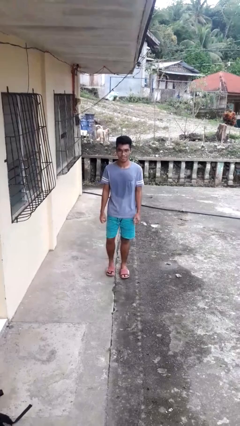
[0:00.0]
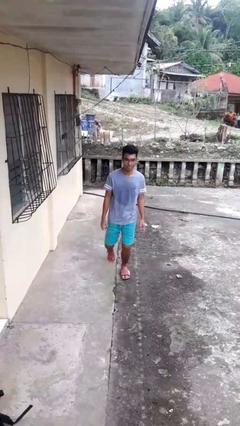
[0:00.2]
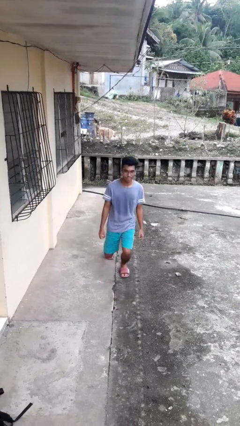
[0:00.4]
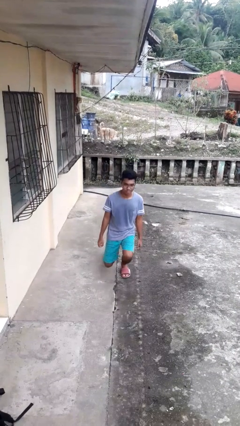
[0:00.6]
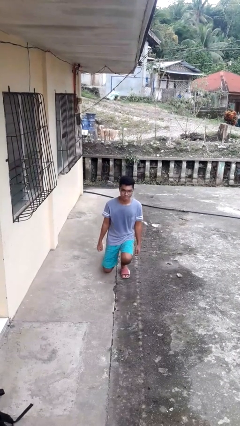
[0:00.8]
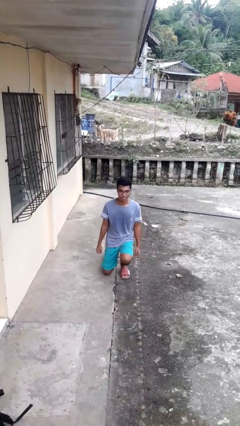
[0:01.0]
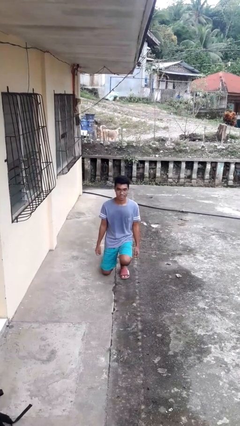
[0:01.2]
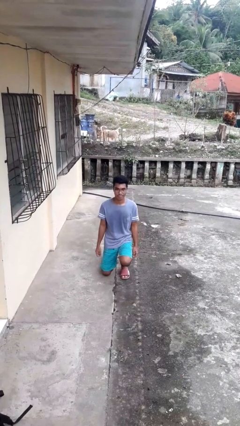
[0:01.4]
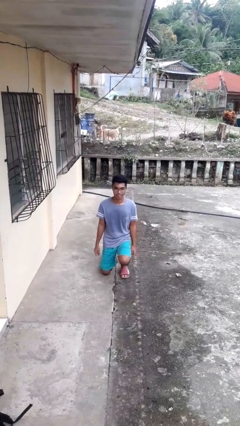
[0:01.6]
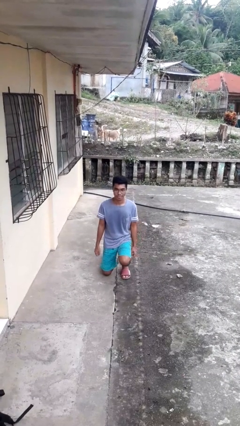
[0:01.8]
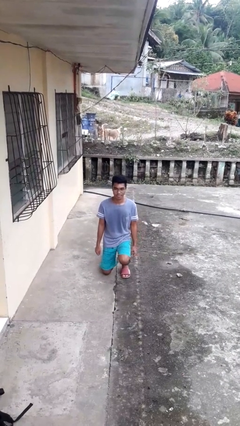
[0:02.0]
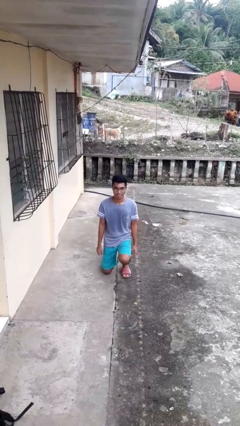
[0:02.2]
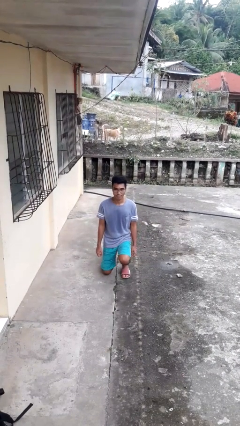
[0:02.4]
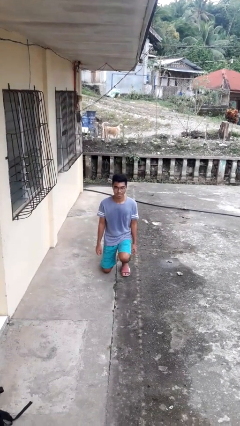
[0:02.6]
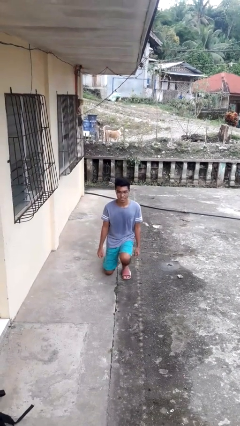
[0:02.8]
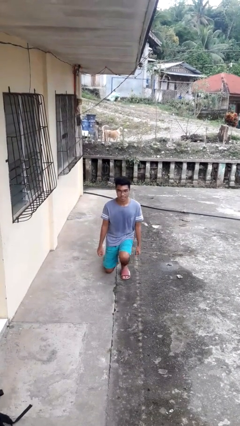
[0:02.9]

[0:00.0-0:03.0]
person kneels

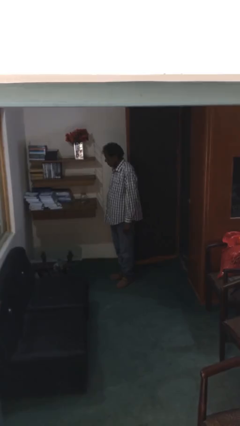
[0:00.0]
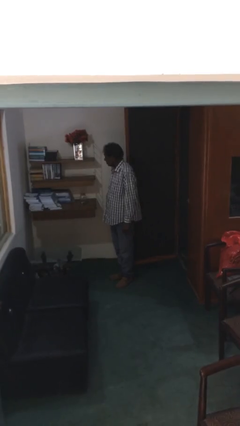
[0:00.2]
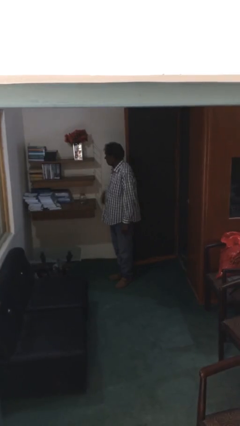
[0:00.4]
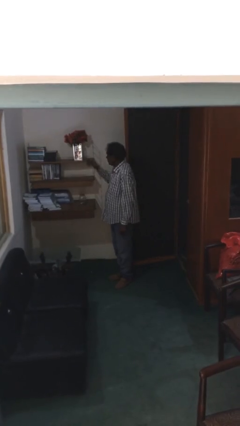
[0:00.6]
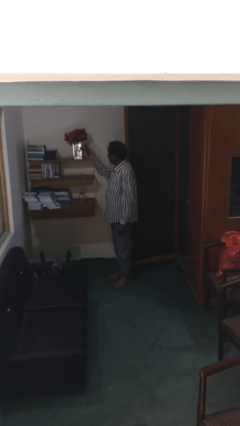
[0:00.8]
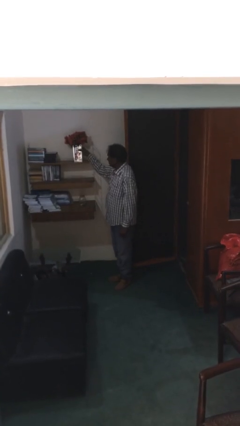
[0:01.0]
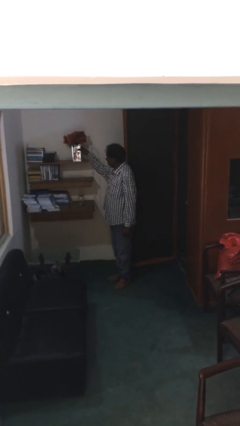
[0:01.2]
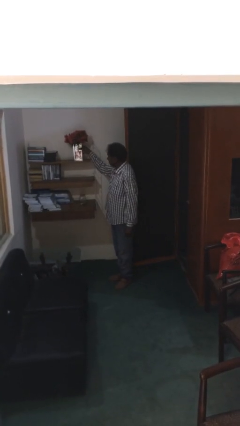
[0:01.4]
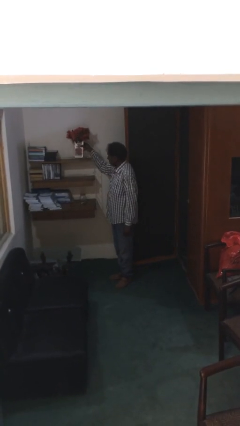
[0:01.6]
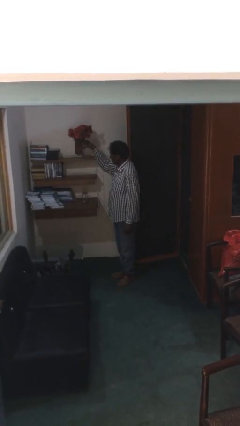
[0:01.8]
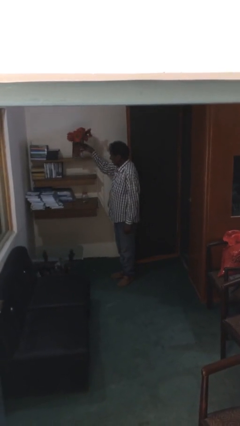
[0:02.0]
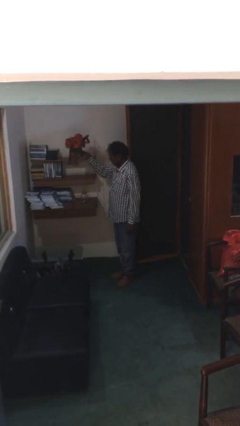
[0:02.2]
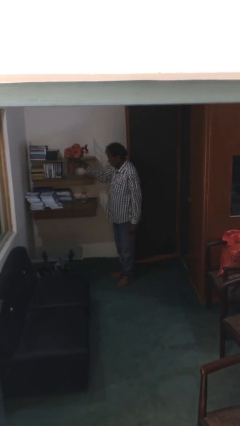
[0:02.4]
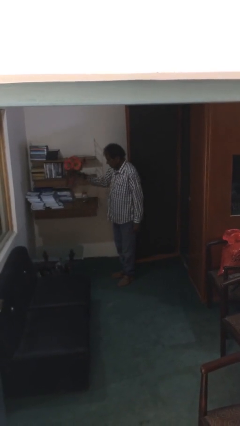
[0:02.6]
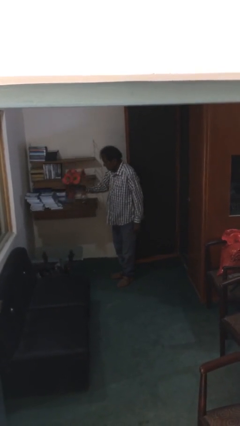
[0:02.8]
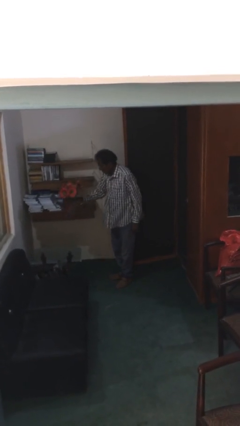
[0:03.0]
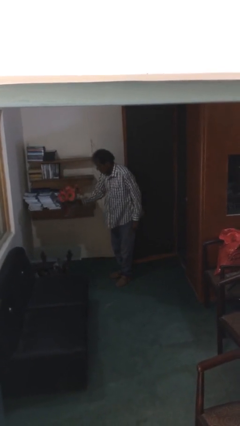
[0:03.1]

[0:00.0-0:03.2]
person picks up object from shelf

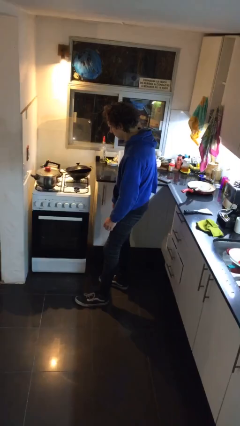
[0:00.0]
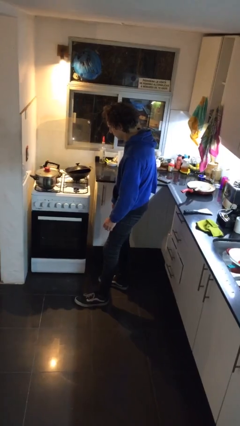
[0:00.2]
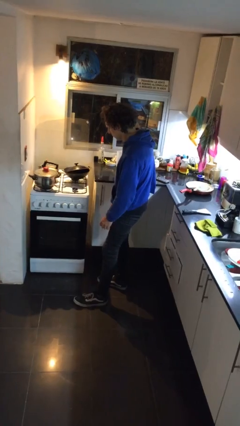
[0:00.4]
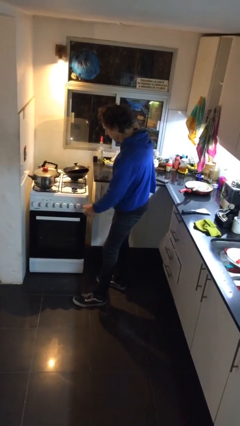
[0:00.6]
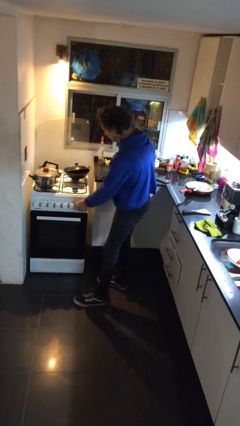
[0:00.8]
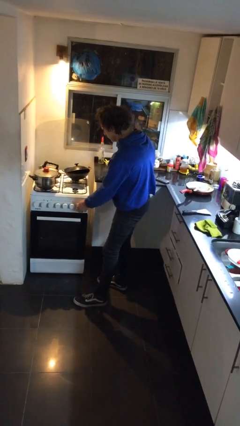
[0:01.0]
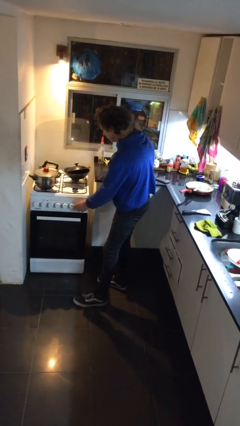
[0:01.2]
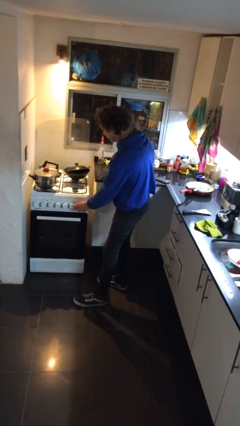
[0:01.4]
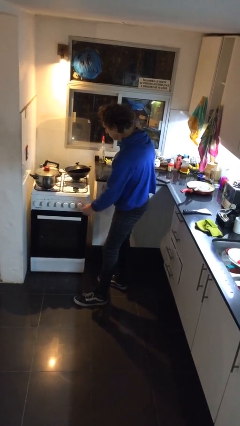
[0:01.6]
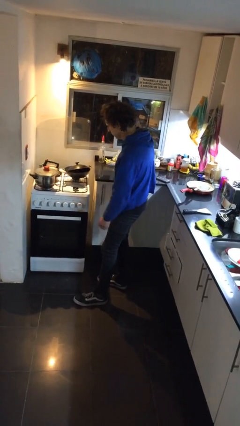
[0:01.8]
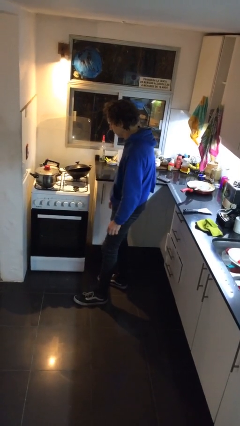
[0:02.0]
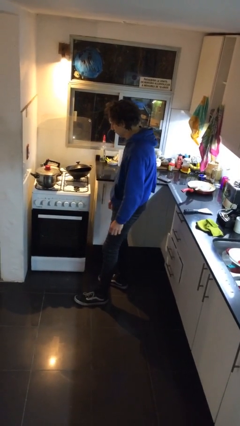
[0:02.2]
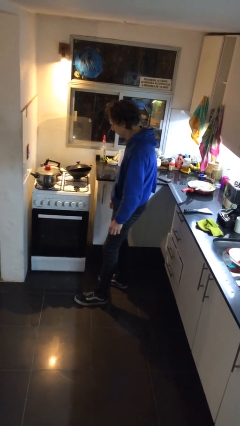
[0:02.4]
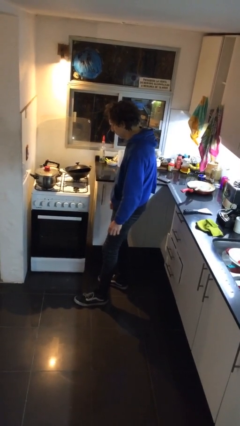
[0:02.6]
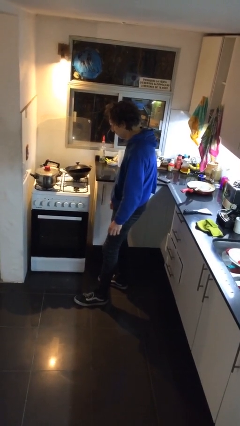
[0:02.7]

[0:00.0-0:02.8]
person turns off stovetop

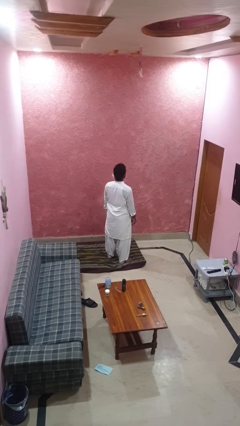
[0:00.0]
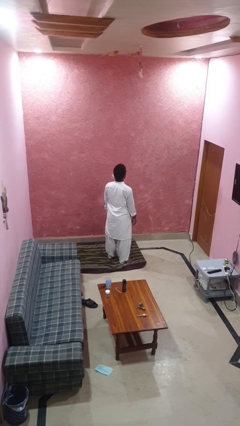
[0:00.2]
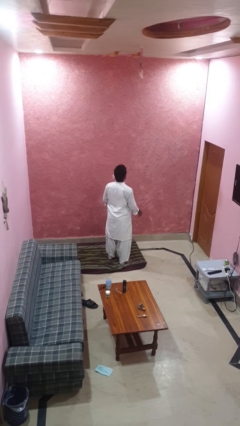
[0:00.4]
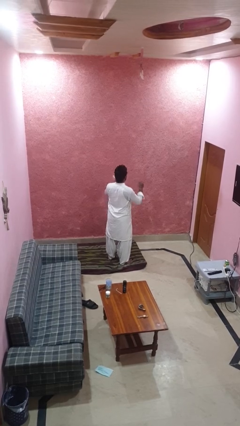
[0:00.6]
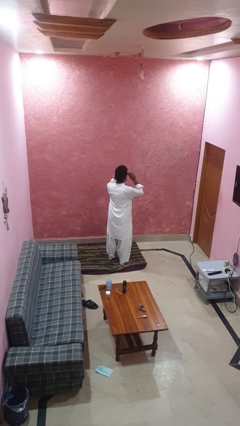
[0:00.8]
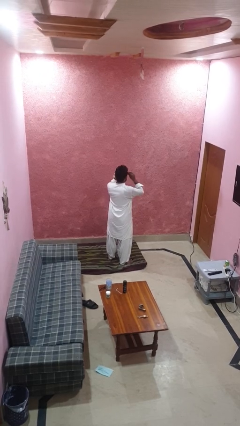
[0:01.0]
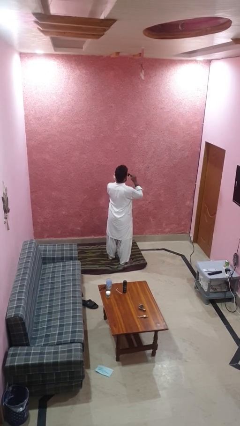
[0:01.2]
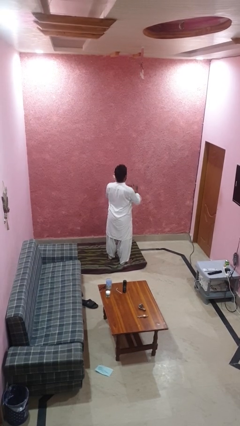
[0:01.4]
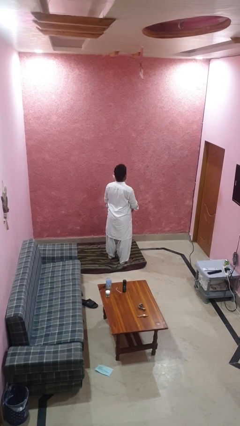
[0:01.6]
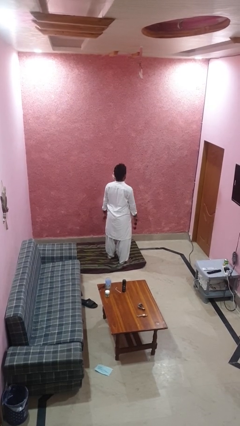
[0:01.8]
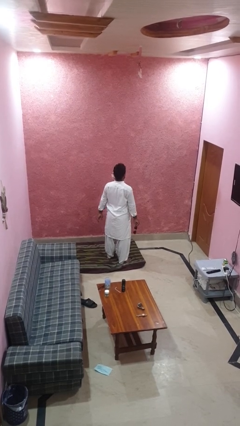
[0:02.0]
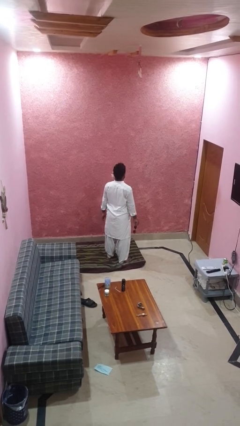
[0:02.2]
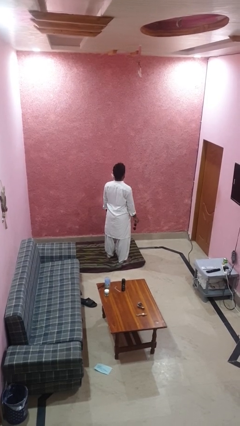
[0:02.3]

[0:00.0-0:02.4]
person takes off sunglasses

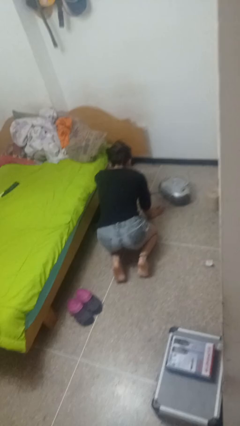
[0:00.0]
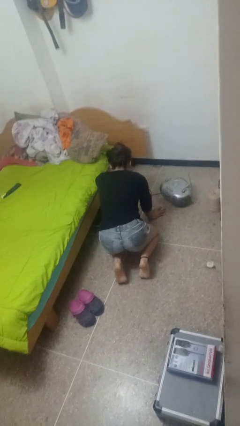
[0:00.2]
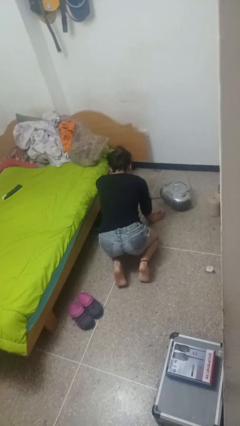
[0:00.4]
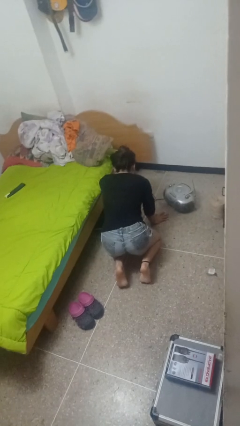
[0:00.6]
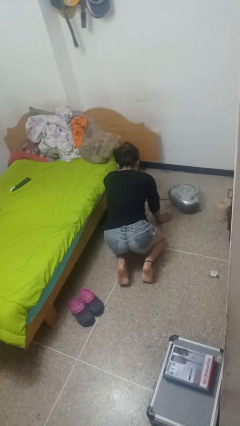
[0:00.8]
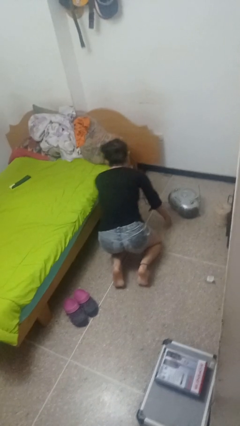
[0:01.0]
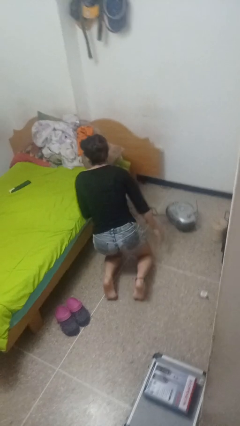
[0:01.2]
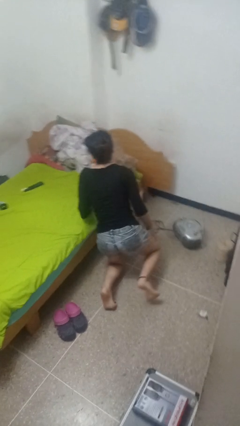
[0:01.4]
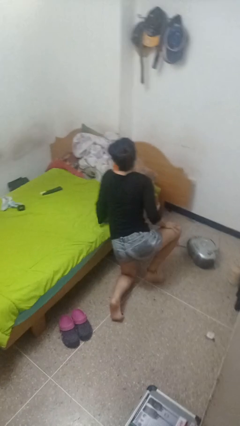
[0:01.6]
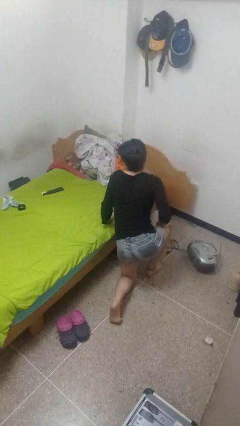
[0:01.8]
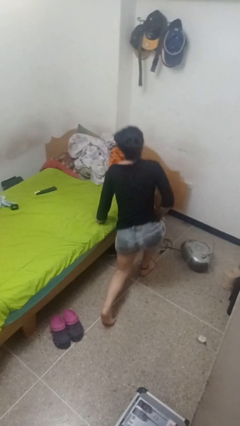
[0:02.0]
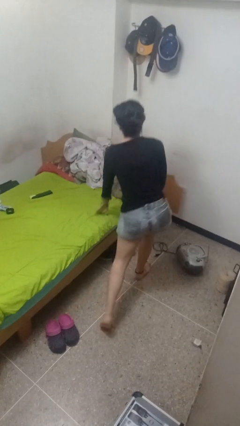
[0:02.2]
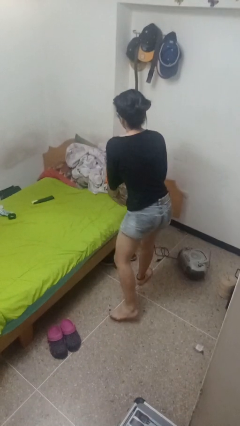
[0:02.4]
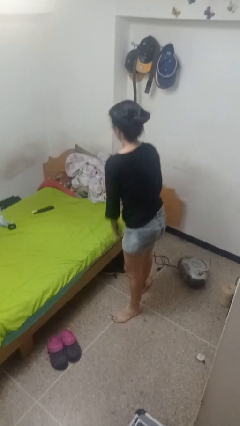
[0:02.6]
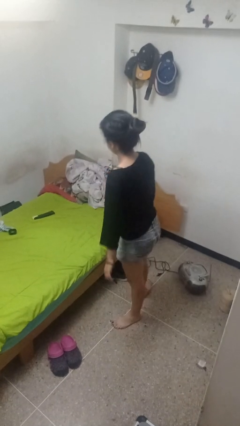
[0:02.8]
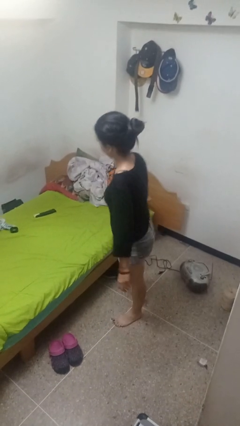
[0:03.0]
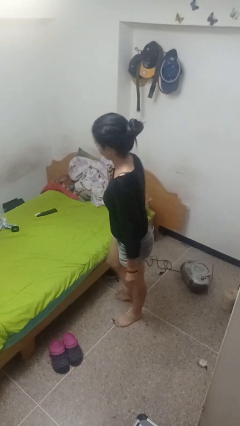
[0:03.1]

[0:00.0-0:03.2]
person stands up from floor

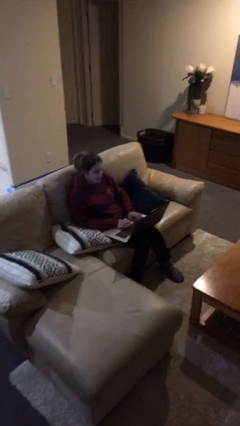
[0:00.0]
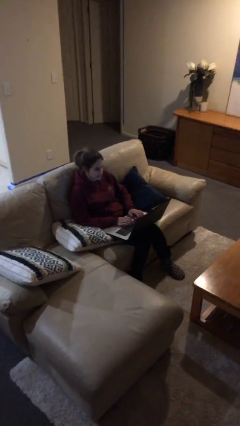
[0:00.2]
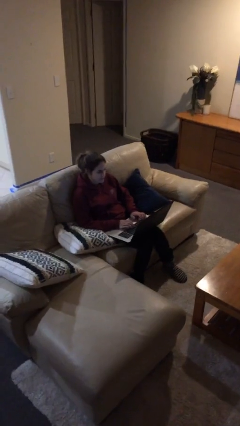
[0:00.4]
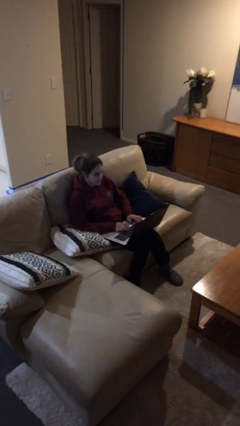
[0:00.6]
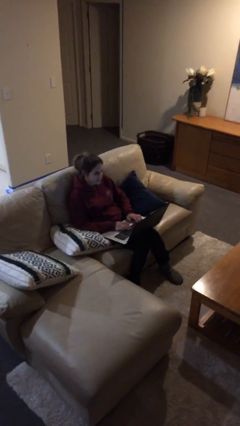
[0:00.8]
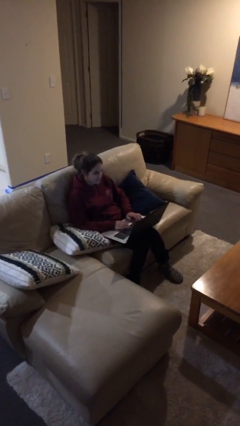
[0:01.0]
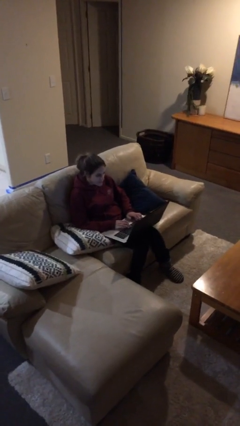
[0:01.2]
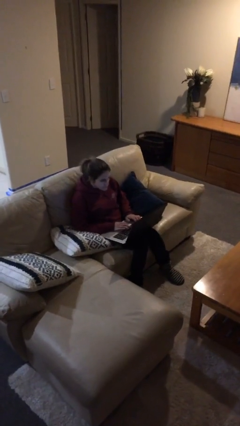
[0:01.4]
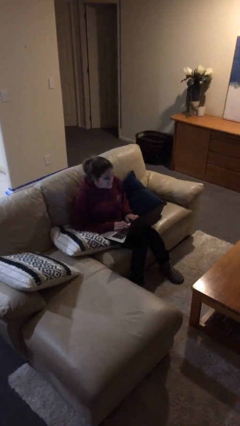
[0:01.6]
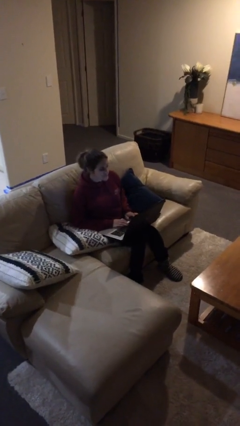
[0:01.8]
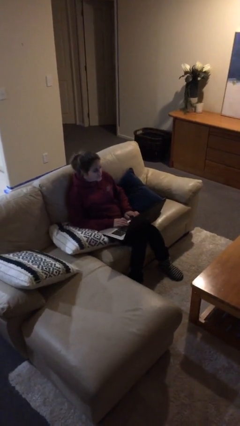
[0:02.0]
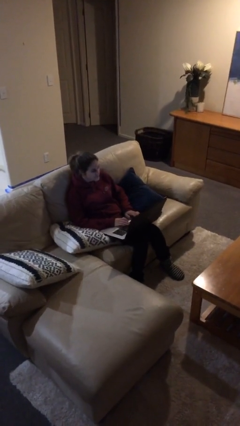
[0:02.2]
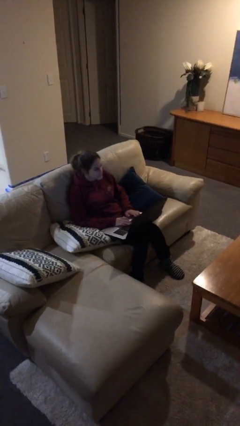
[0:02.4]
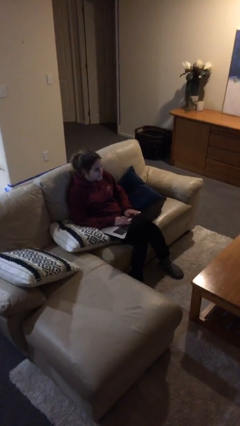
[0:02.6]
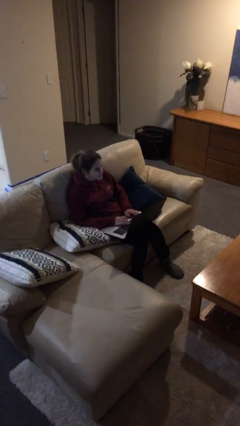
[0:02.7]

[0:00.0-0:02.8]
person interacts with laptop
